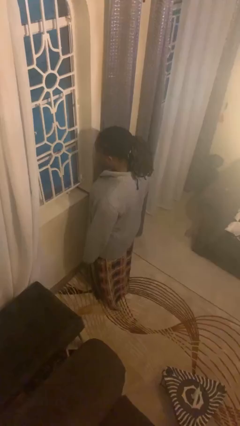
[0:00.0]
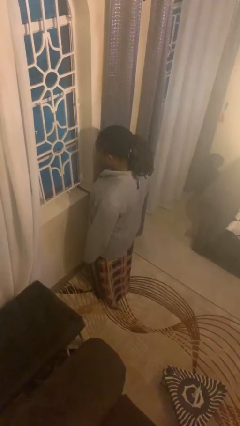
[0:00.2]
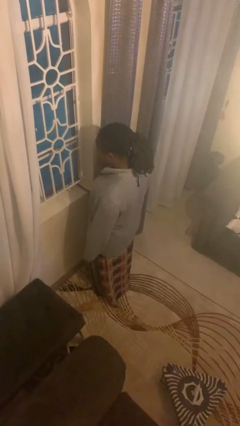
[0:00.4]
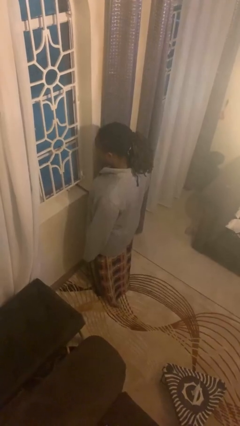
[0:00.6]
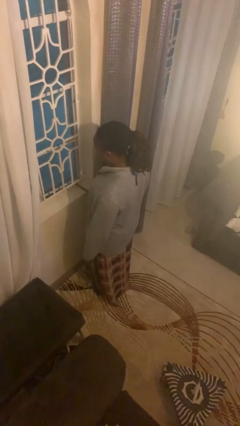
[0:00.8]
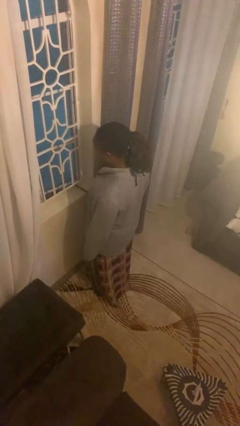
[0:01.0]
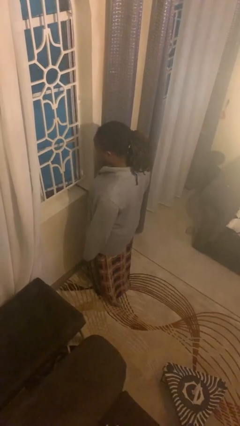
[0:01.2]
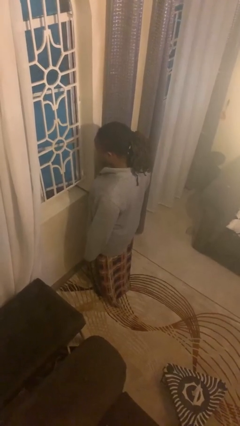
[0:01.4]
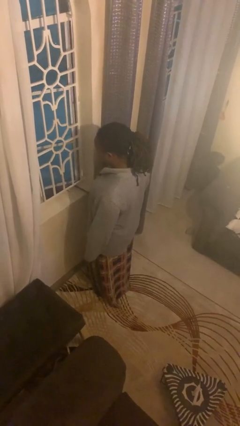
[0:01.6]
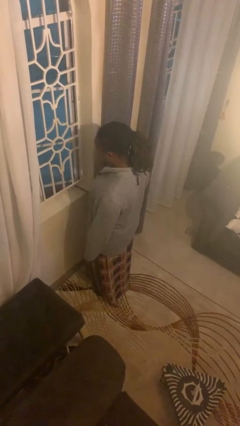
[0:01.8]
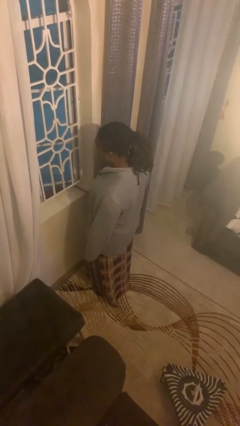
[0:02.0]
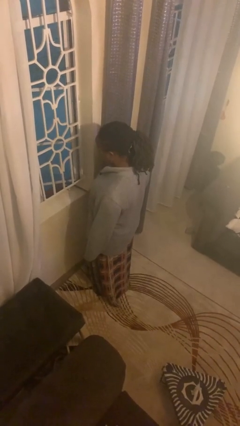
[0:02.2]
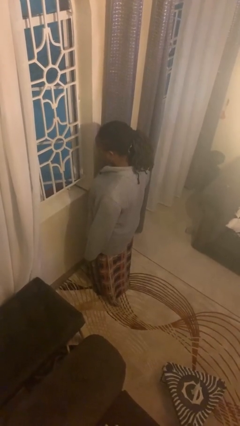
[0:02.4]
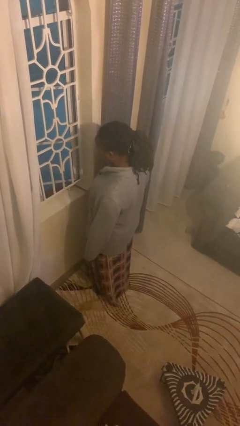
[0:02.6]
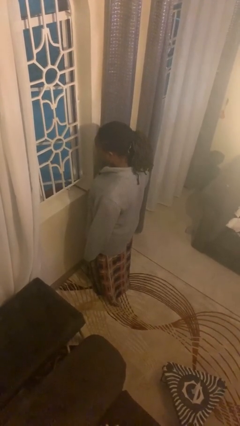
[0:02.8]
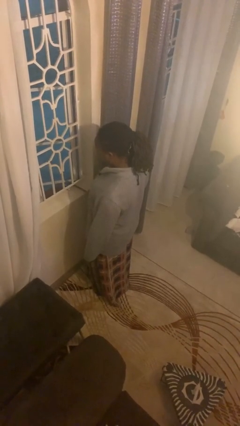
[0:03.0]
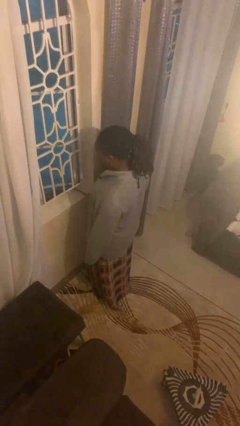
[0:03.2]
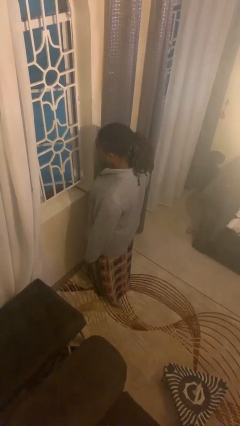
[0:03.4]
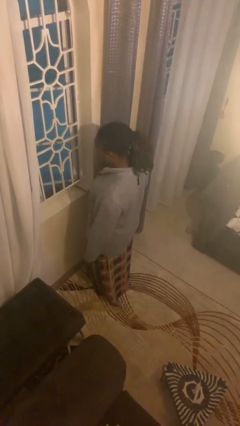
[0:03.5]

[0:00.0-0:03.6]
person opens home window

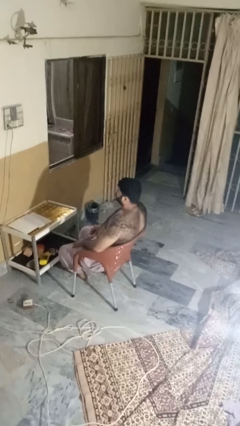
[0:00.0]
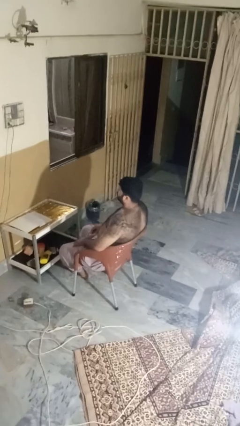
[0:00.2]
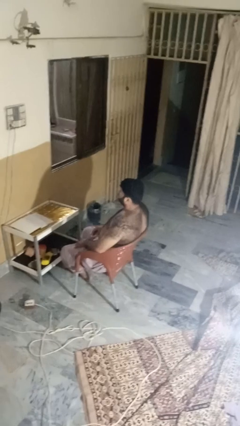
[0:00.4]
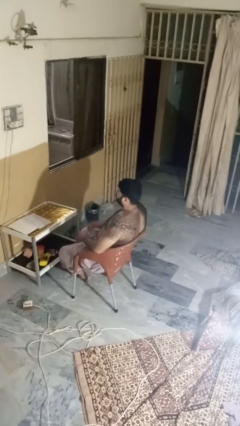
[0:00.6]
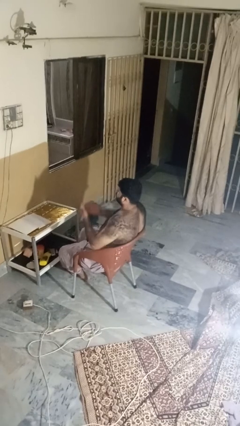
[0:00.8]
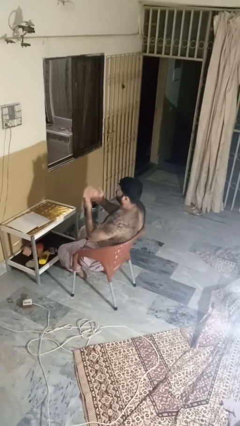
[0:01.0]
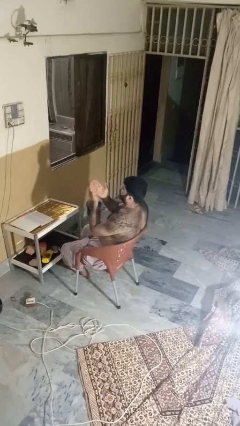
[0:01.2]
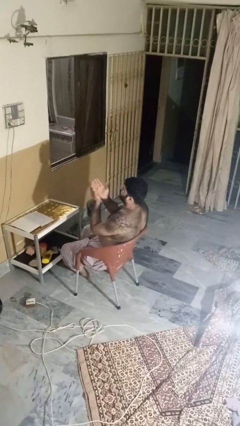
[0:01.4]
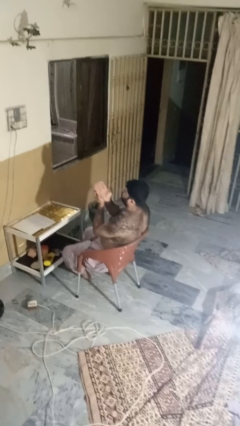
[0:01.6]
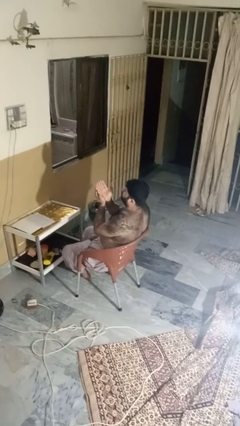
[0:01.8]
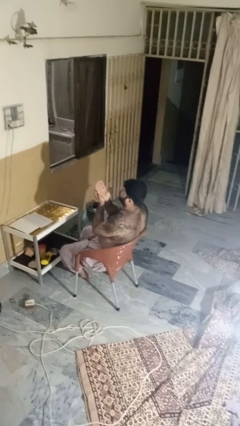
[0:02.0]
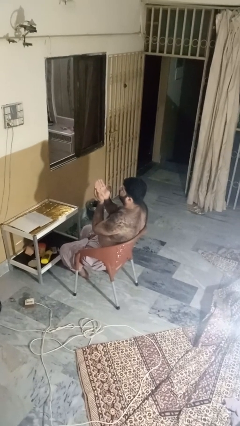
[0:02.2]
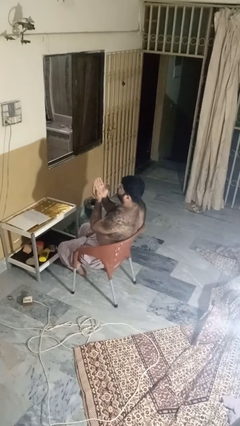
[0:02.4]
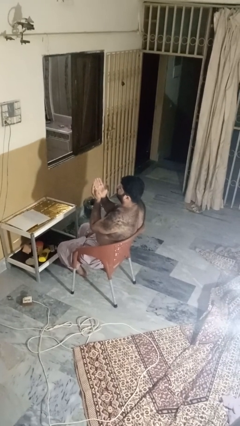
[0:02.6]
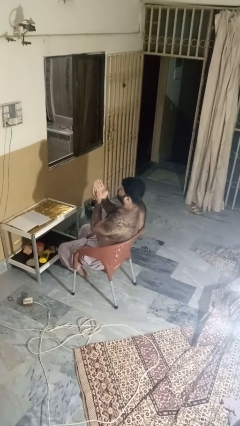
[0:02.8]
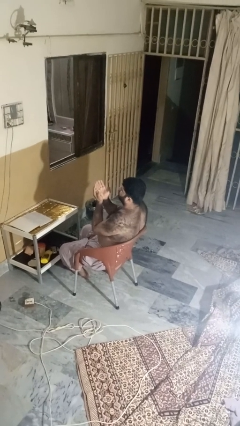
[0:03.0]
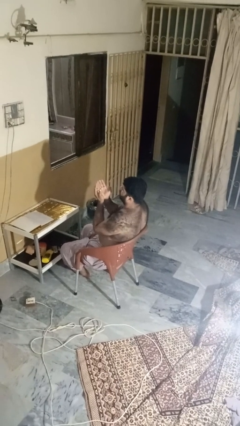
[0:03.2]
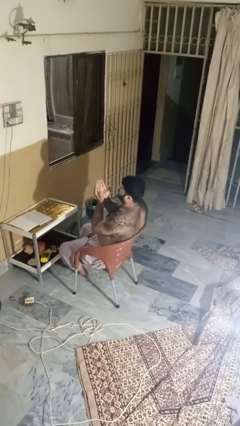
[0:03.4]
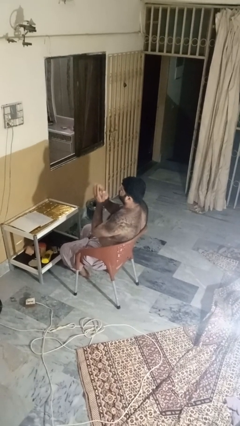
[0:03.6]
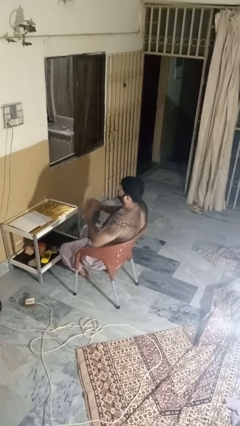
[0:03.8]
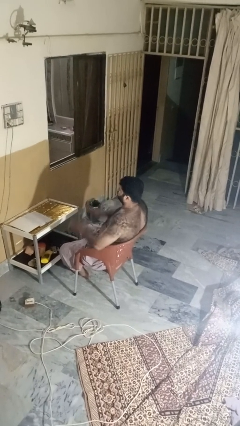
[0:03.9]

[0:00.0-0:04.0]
person prays

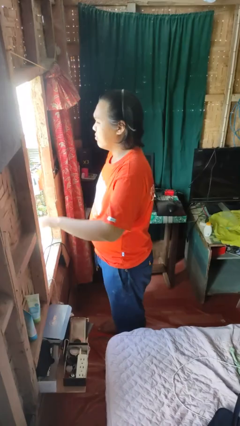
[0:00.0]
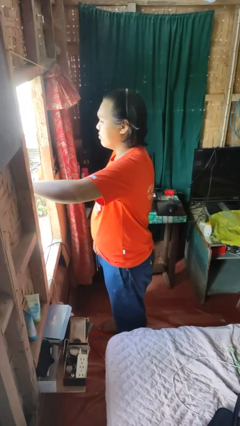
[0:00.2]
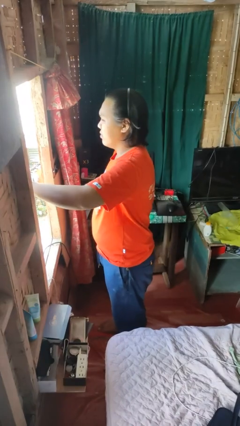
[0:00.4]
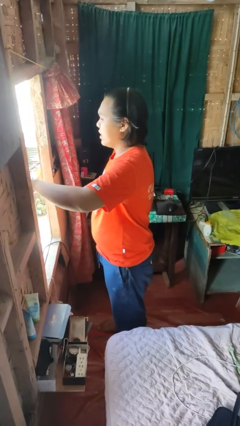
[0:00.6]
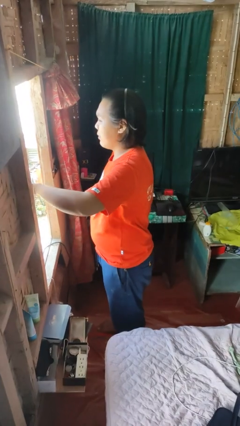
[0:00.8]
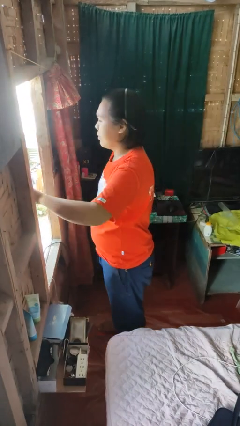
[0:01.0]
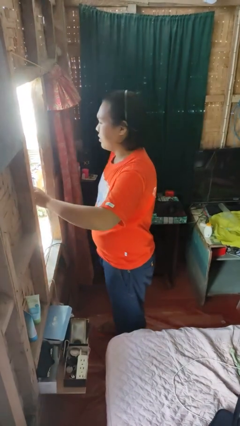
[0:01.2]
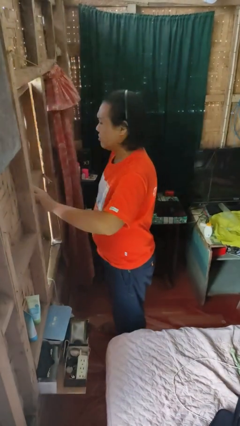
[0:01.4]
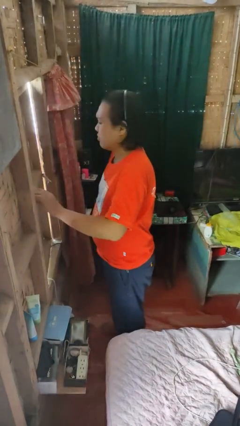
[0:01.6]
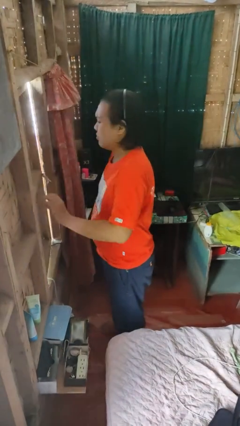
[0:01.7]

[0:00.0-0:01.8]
person closes home window

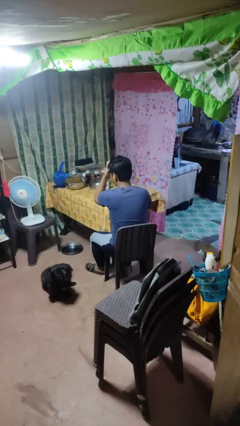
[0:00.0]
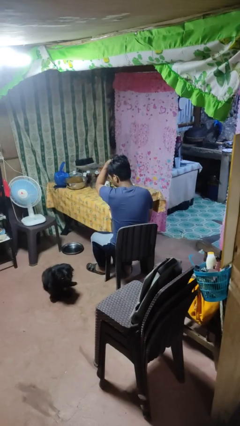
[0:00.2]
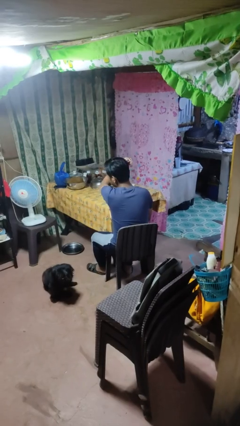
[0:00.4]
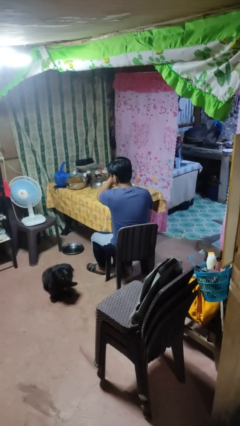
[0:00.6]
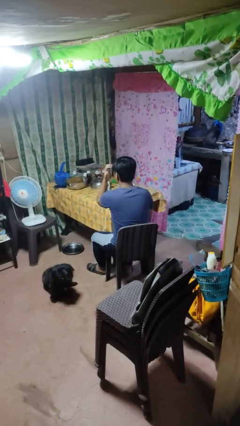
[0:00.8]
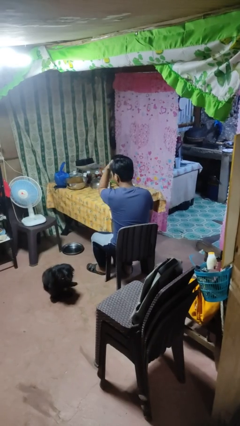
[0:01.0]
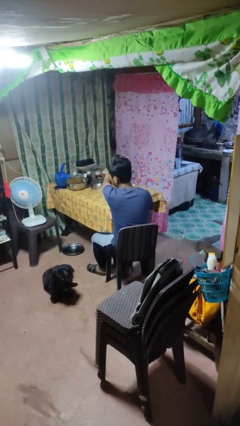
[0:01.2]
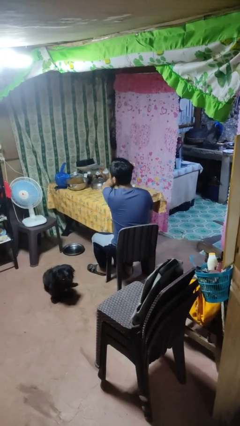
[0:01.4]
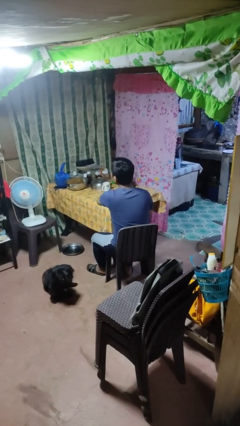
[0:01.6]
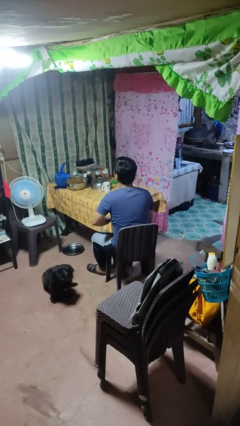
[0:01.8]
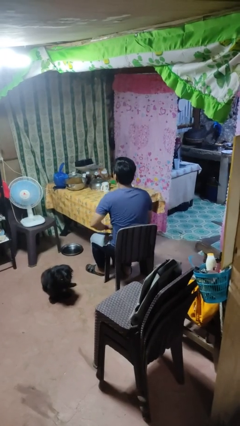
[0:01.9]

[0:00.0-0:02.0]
person strokes hair

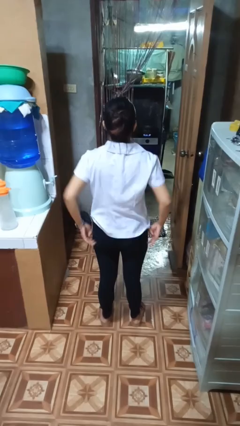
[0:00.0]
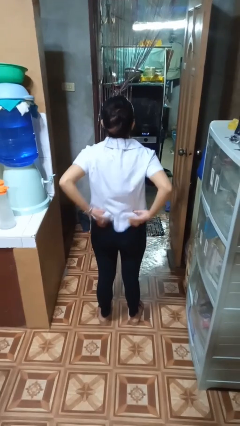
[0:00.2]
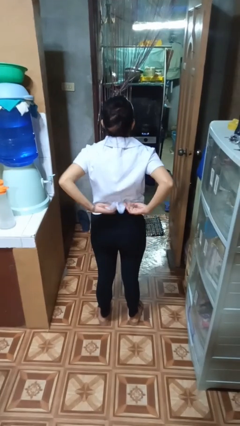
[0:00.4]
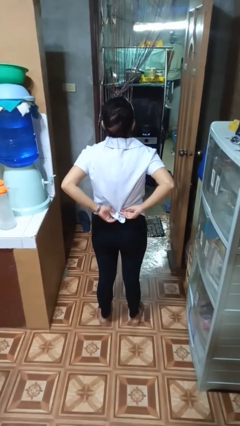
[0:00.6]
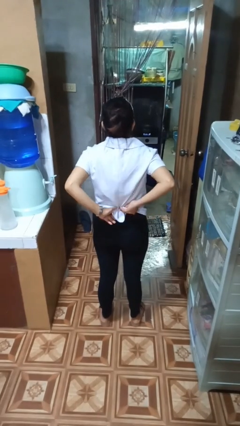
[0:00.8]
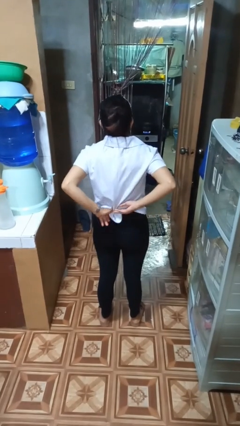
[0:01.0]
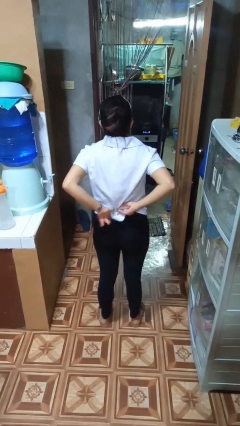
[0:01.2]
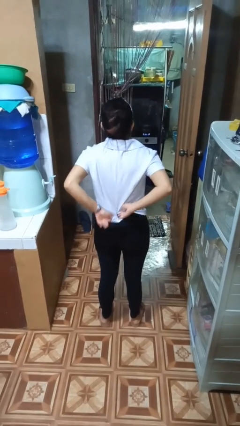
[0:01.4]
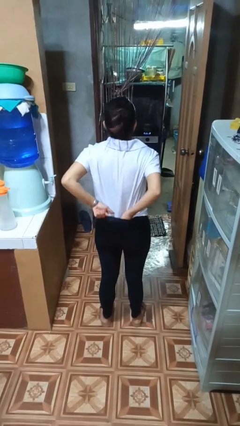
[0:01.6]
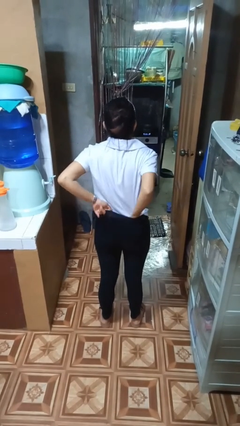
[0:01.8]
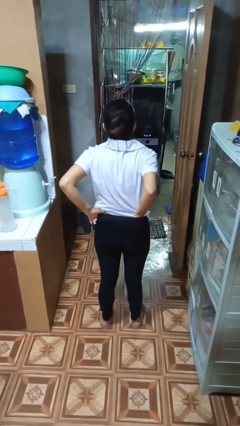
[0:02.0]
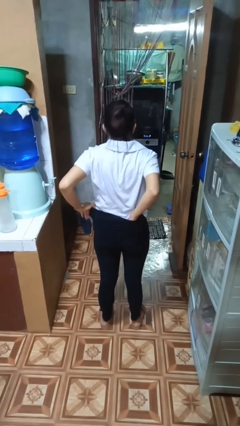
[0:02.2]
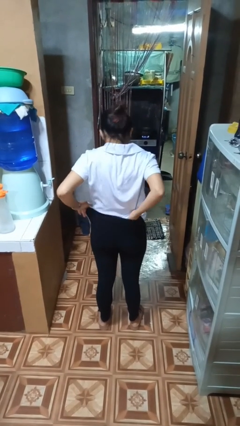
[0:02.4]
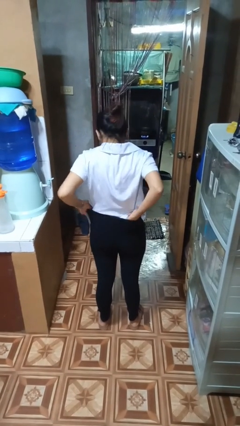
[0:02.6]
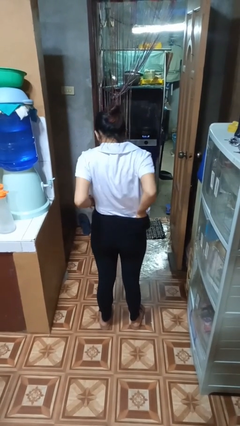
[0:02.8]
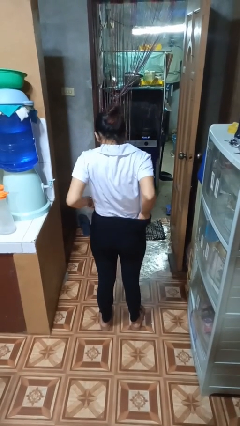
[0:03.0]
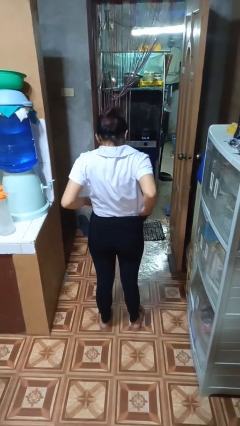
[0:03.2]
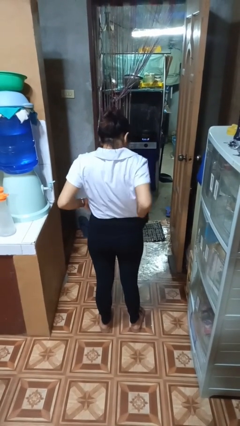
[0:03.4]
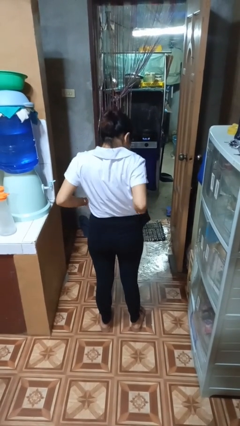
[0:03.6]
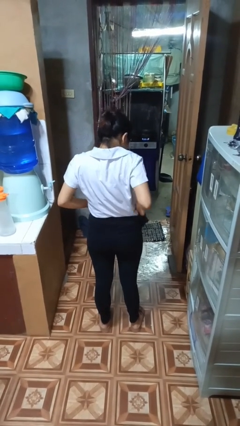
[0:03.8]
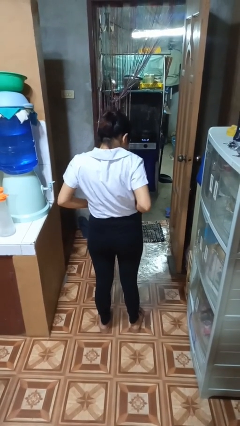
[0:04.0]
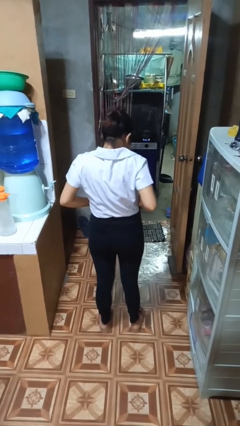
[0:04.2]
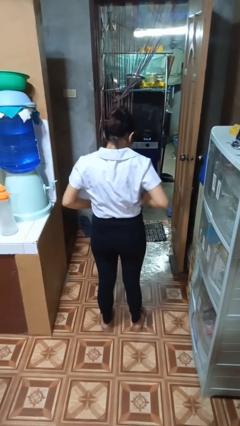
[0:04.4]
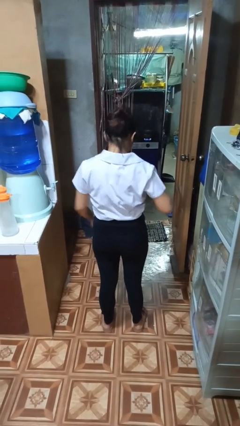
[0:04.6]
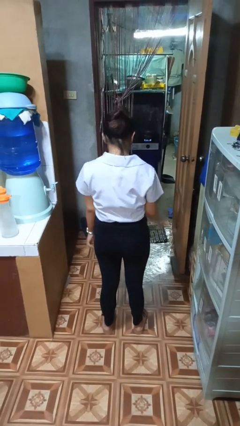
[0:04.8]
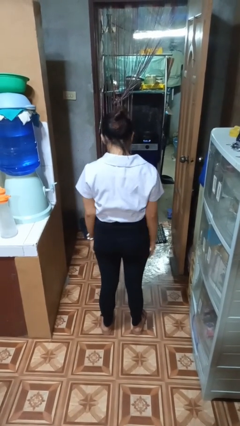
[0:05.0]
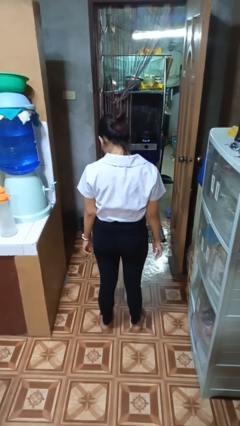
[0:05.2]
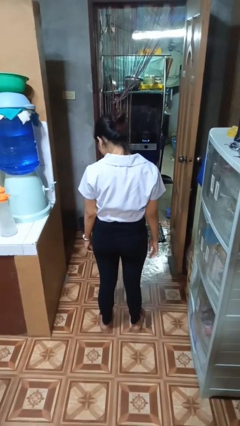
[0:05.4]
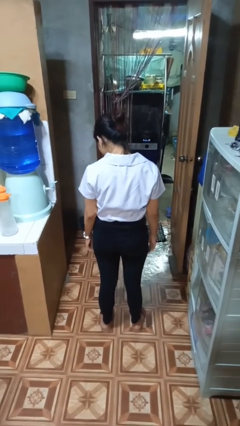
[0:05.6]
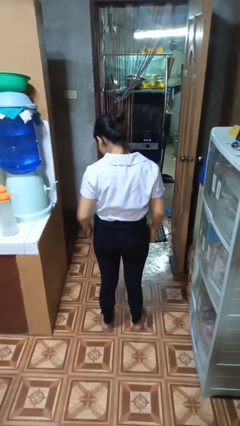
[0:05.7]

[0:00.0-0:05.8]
person tucks in shirt

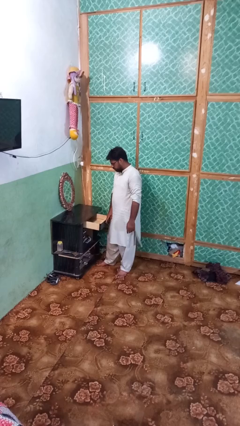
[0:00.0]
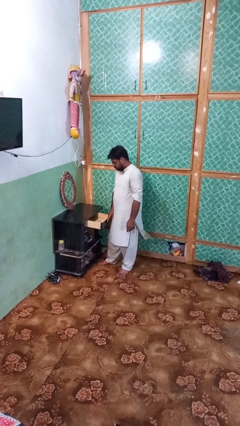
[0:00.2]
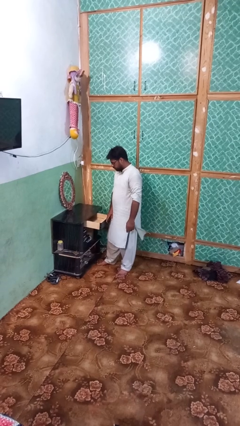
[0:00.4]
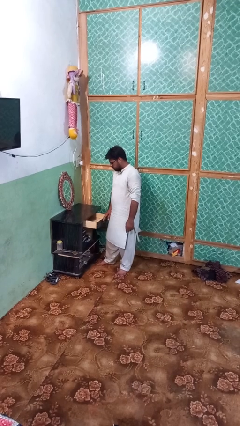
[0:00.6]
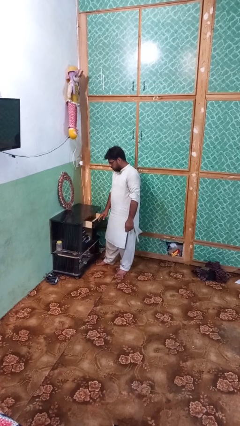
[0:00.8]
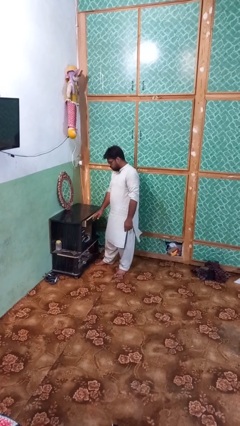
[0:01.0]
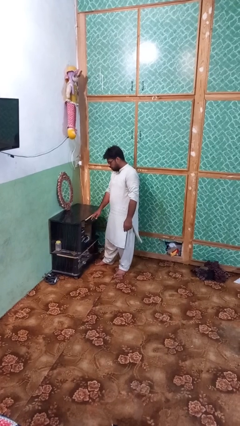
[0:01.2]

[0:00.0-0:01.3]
person closes dresser drawer
